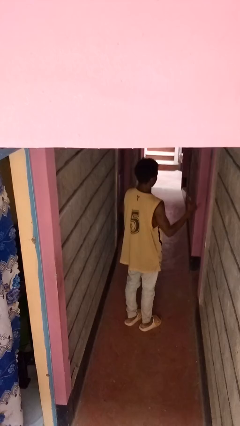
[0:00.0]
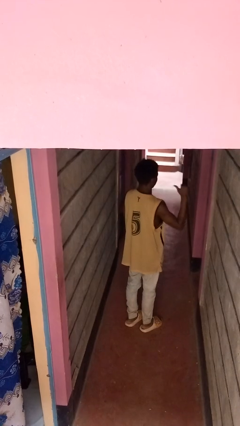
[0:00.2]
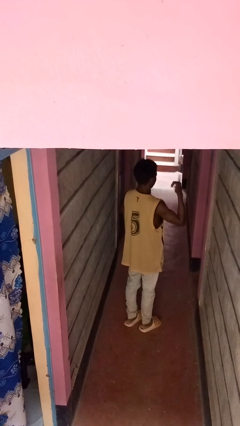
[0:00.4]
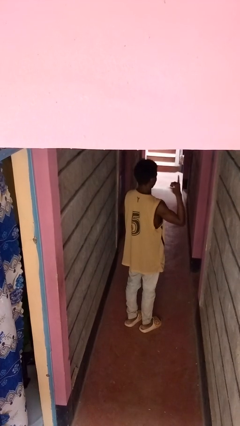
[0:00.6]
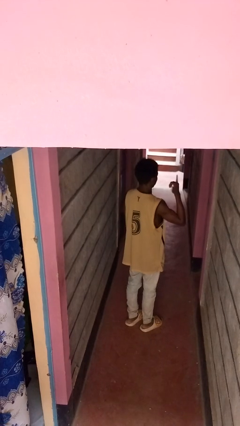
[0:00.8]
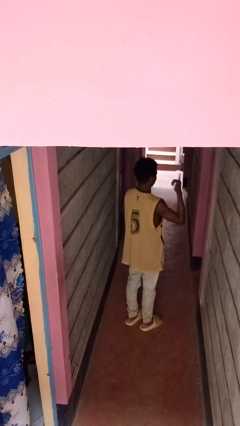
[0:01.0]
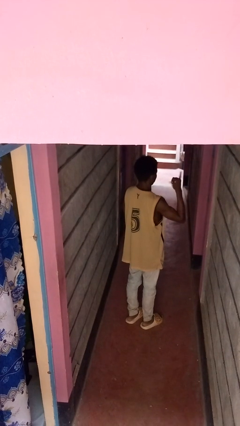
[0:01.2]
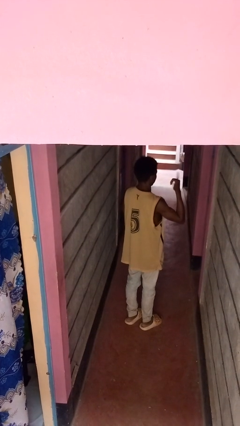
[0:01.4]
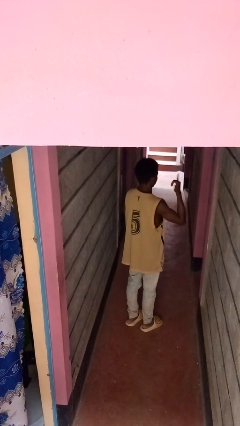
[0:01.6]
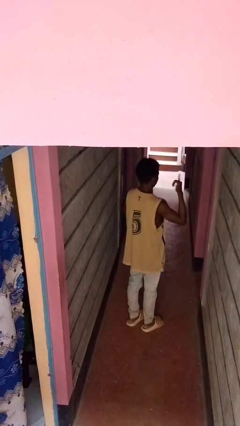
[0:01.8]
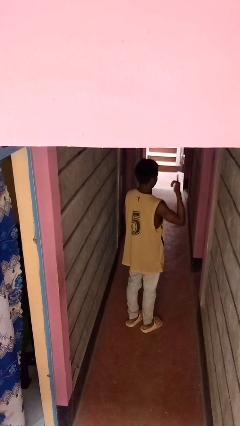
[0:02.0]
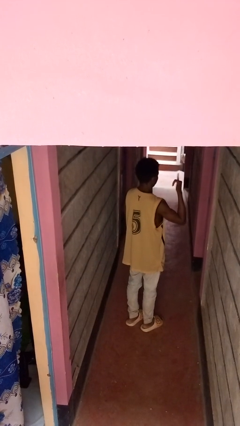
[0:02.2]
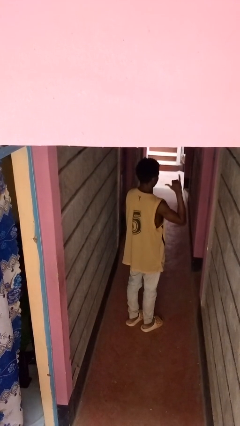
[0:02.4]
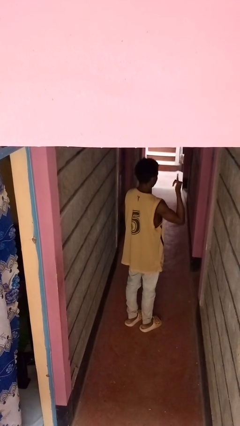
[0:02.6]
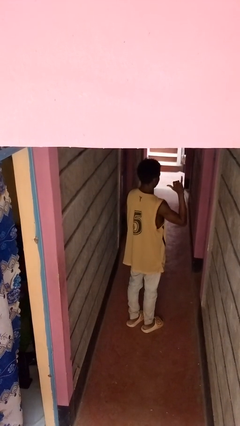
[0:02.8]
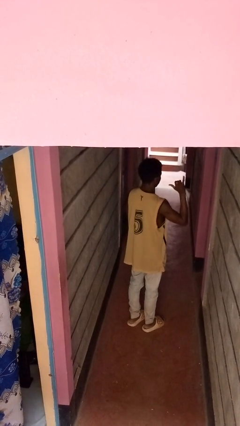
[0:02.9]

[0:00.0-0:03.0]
person gestures hang loose

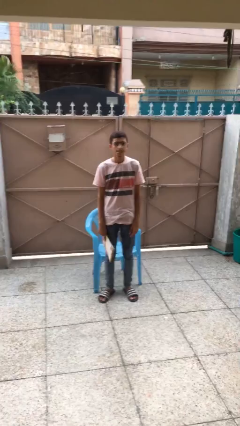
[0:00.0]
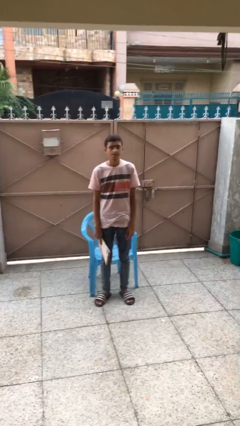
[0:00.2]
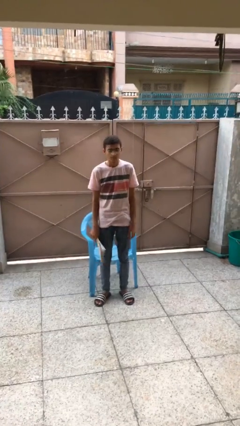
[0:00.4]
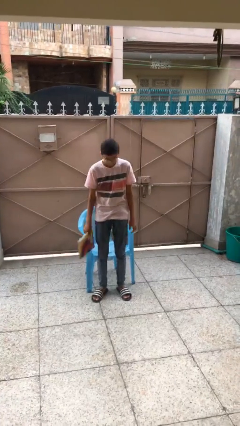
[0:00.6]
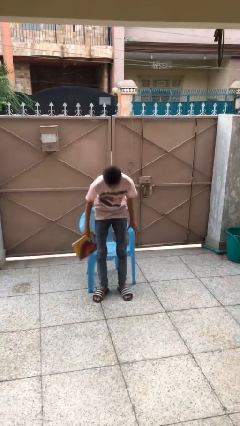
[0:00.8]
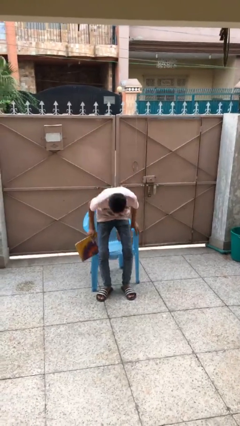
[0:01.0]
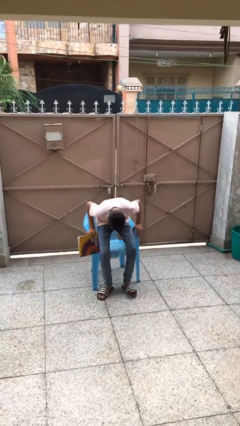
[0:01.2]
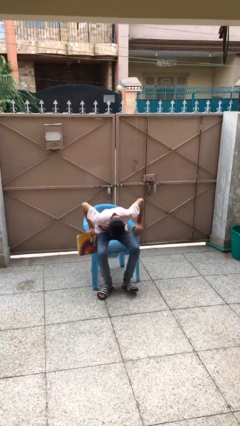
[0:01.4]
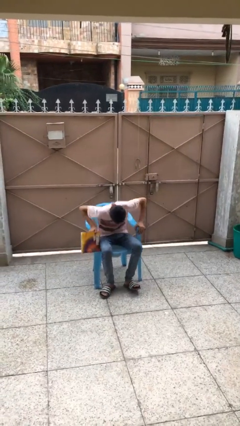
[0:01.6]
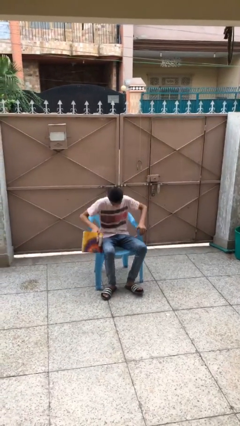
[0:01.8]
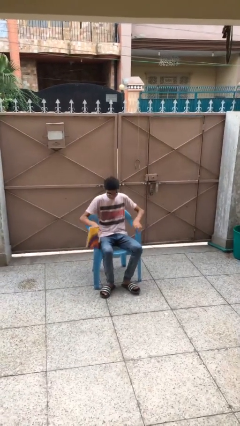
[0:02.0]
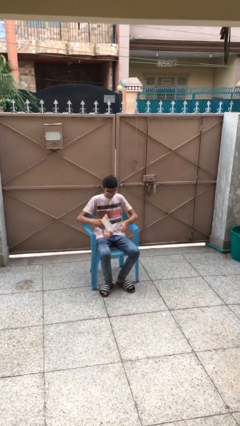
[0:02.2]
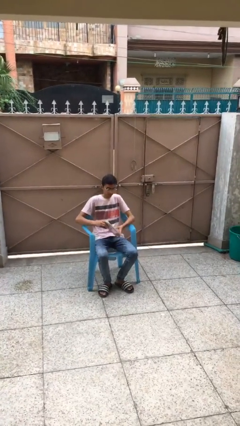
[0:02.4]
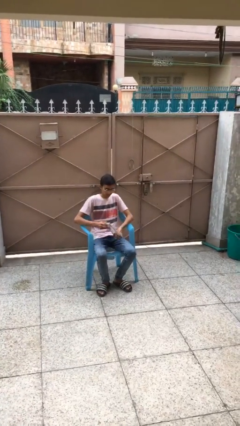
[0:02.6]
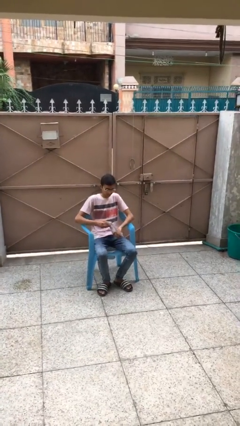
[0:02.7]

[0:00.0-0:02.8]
person sits down

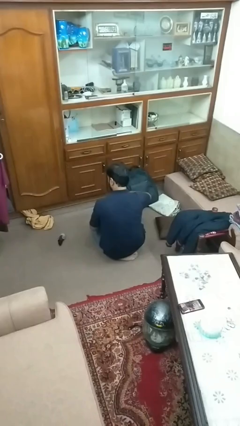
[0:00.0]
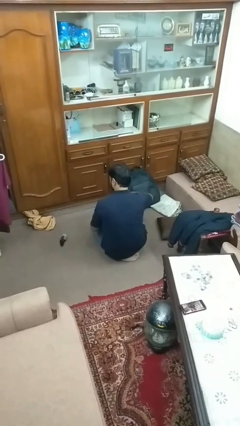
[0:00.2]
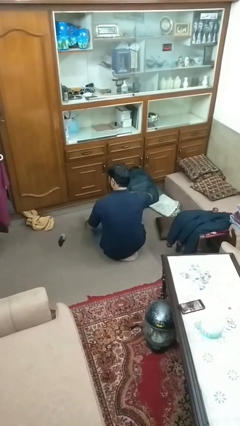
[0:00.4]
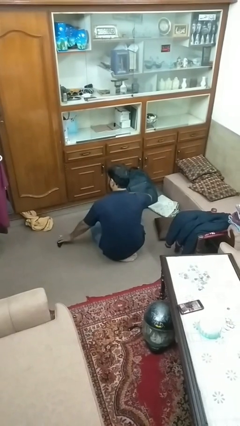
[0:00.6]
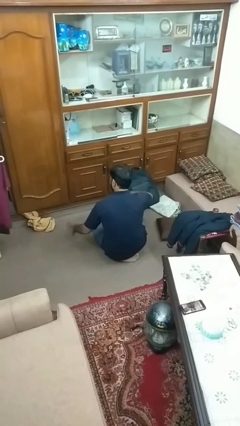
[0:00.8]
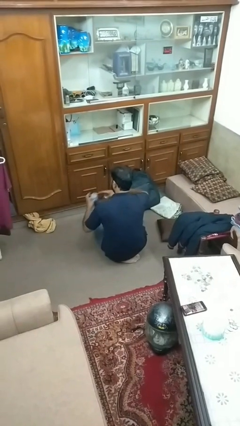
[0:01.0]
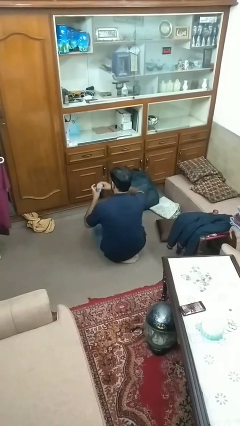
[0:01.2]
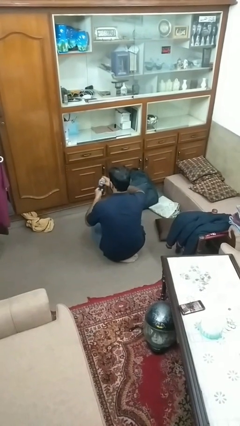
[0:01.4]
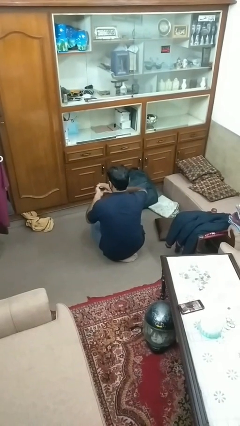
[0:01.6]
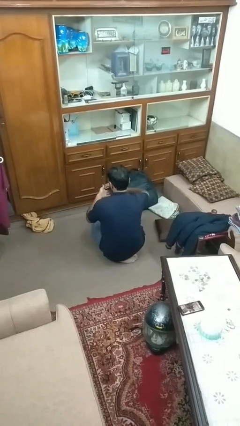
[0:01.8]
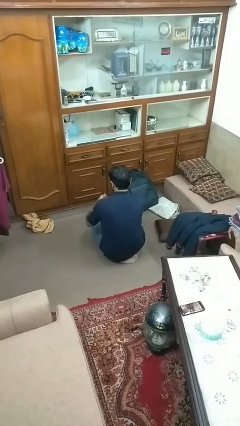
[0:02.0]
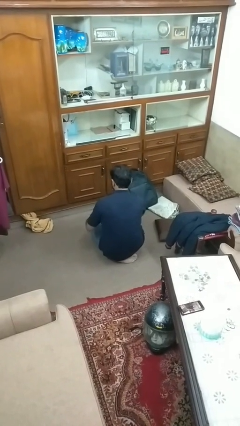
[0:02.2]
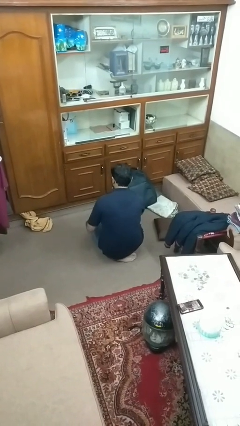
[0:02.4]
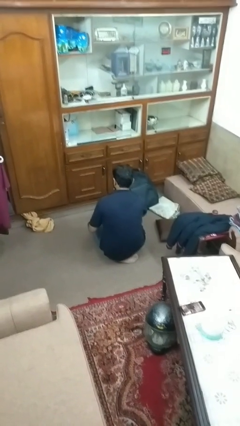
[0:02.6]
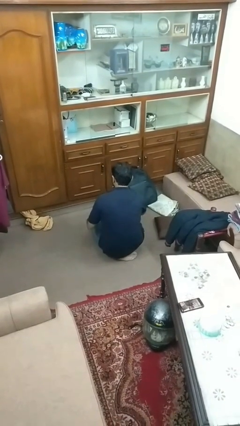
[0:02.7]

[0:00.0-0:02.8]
person folds socks

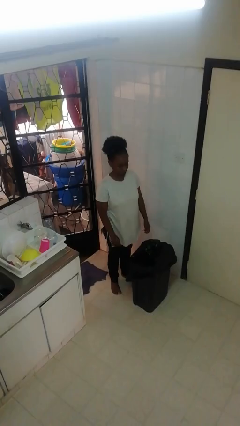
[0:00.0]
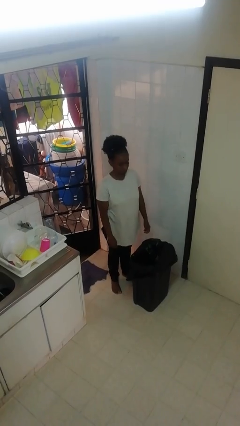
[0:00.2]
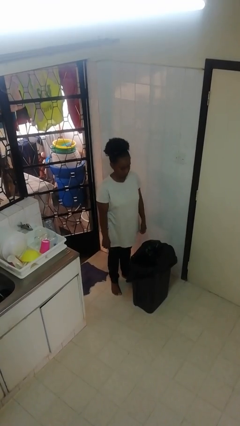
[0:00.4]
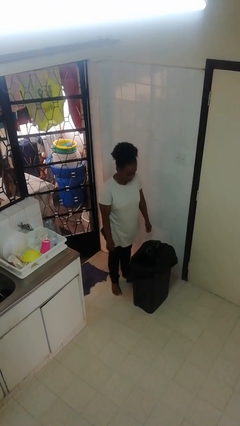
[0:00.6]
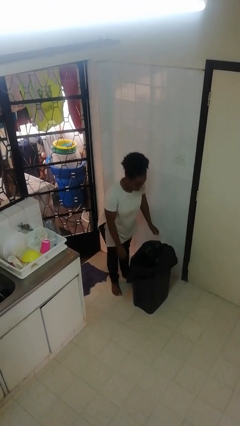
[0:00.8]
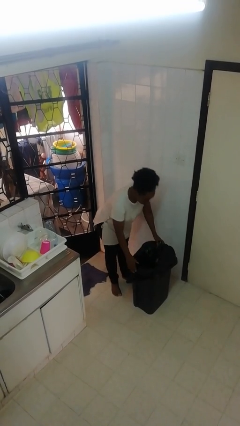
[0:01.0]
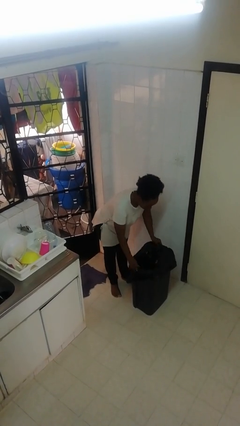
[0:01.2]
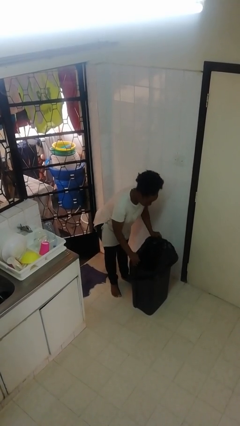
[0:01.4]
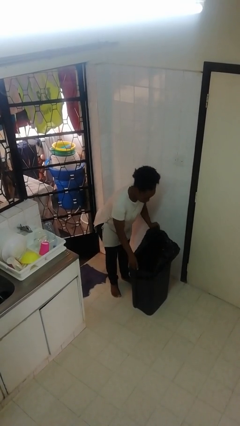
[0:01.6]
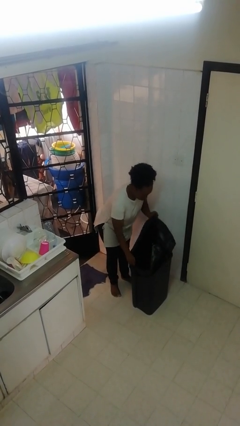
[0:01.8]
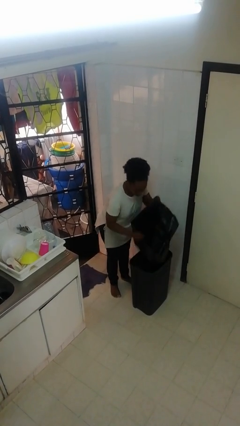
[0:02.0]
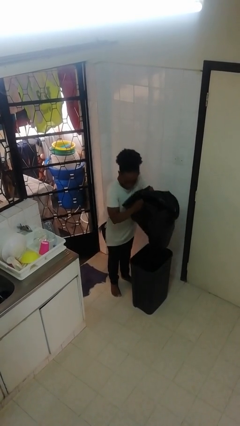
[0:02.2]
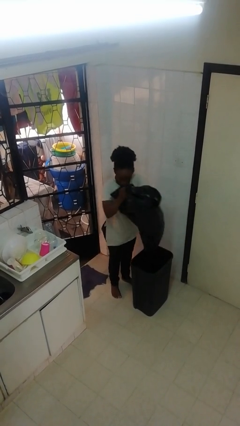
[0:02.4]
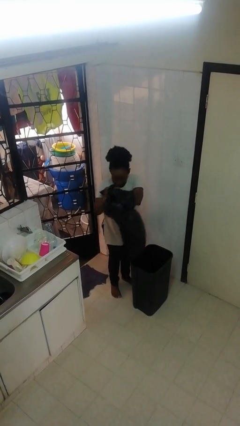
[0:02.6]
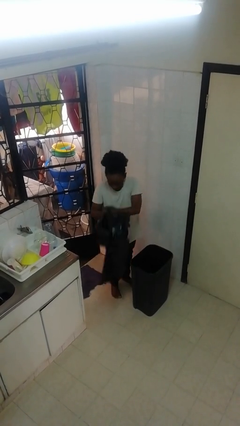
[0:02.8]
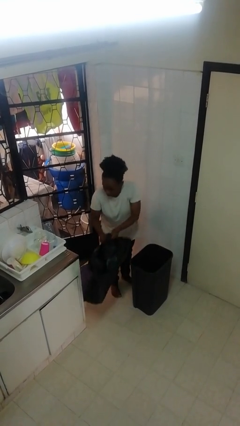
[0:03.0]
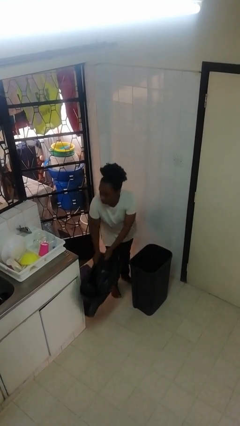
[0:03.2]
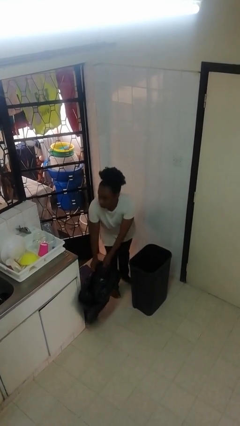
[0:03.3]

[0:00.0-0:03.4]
person removes trashbag from trashcan

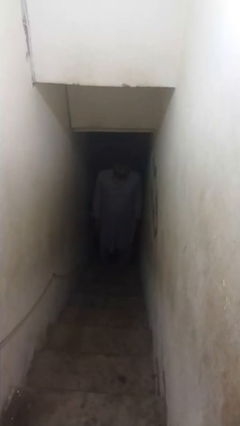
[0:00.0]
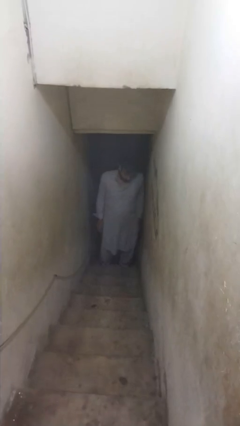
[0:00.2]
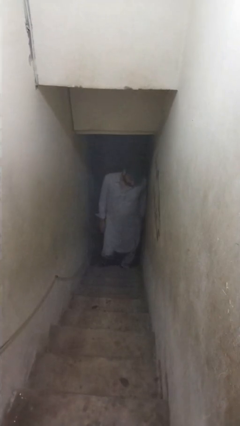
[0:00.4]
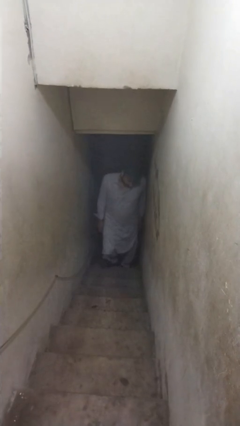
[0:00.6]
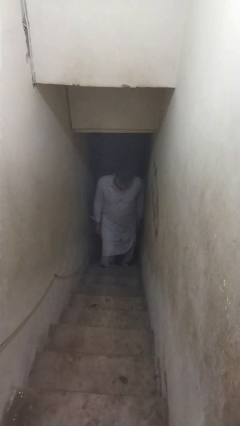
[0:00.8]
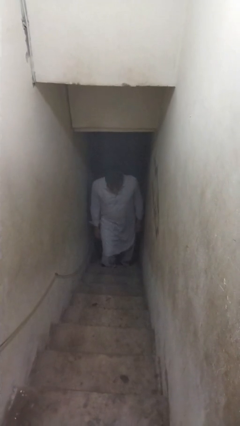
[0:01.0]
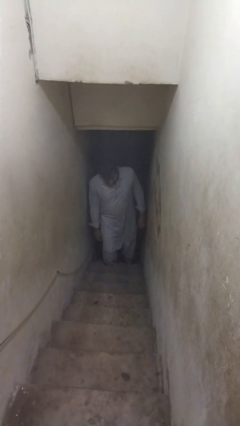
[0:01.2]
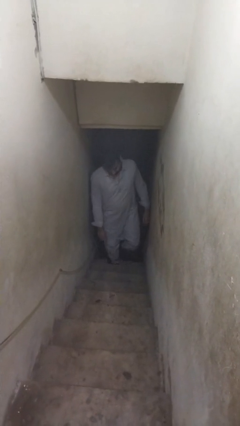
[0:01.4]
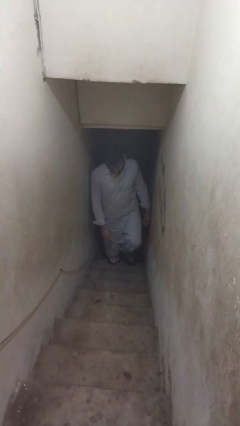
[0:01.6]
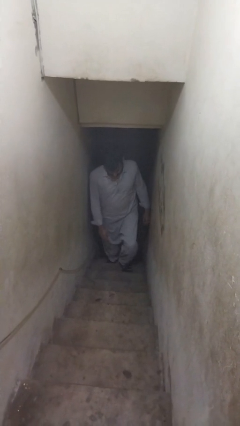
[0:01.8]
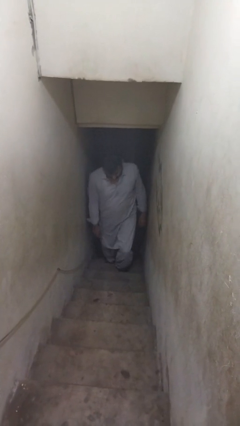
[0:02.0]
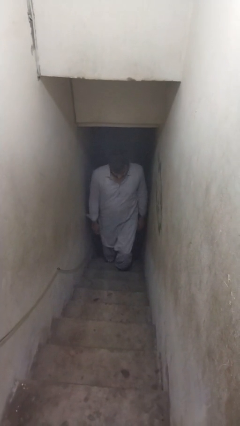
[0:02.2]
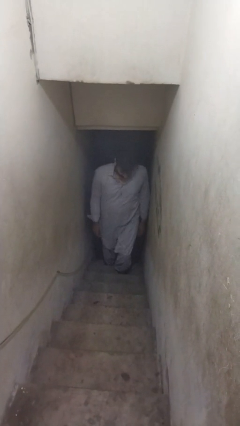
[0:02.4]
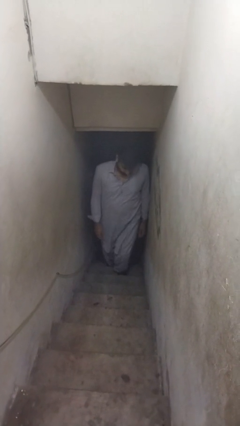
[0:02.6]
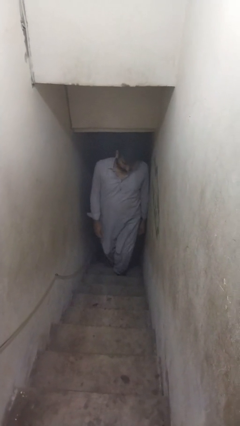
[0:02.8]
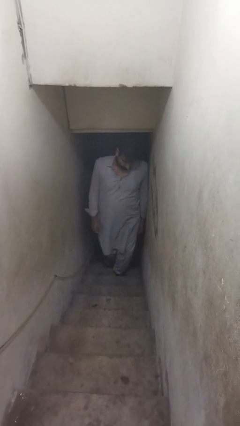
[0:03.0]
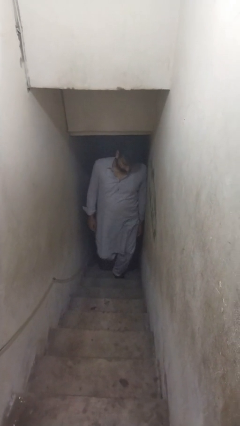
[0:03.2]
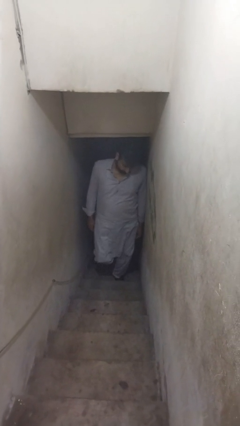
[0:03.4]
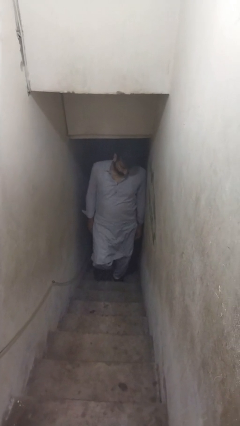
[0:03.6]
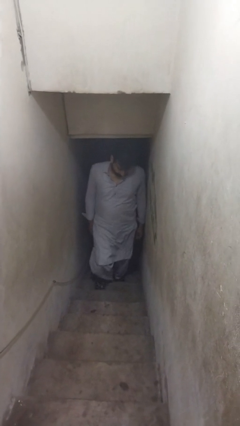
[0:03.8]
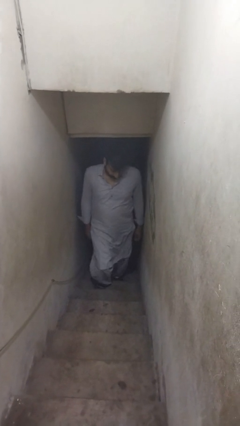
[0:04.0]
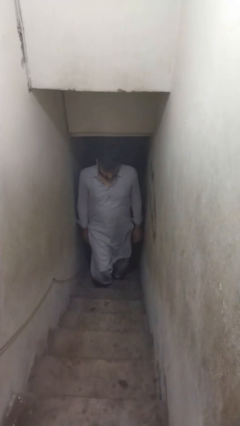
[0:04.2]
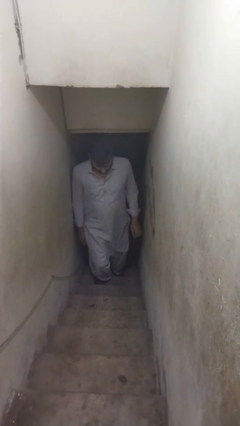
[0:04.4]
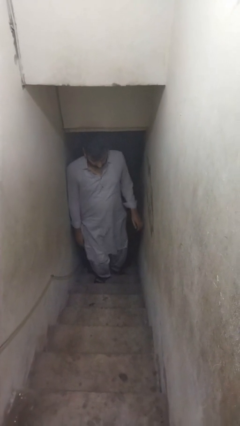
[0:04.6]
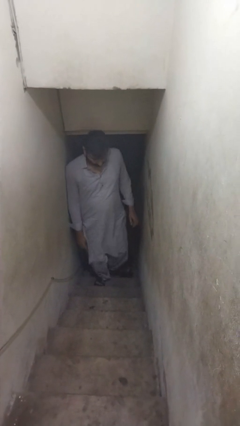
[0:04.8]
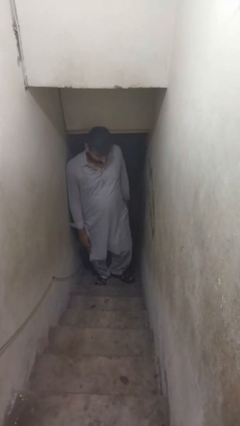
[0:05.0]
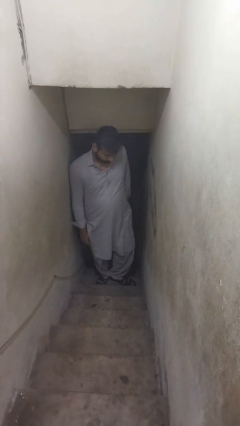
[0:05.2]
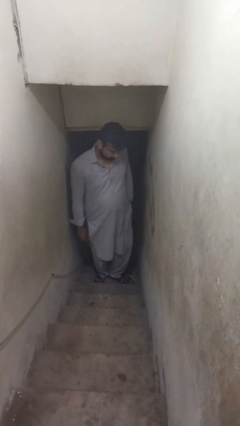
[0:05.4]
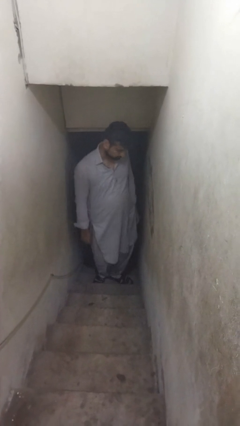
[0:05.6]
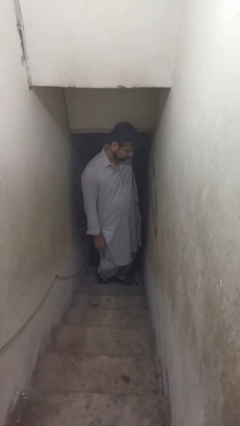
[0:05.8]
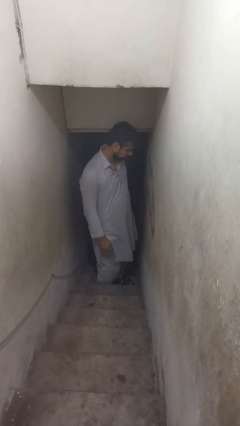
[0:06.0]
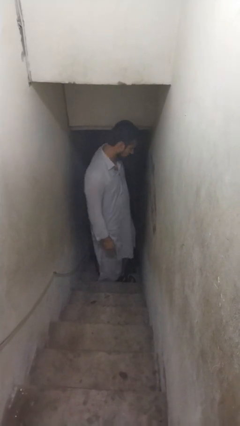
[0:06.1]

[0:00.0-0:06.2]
person climbs up stairs
